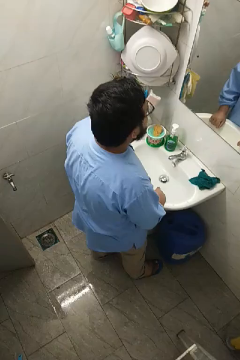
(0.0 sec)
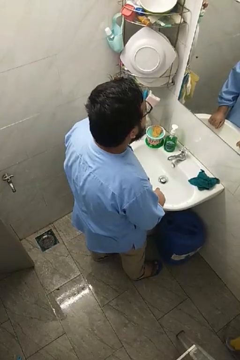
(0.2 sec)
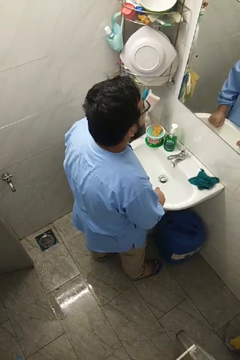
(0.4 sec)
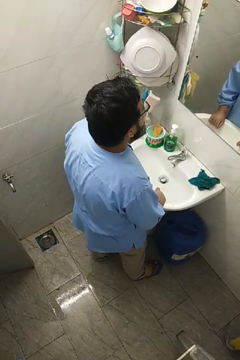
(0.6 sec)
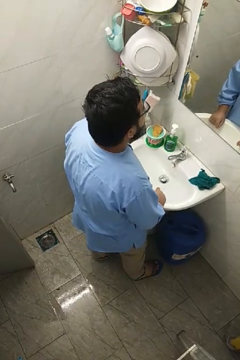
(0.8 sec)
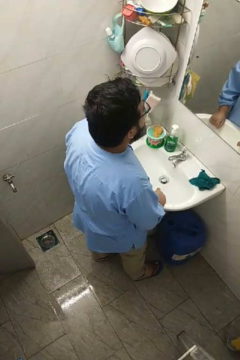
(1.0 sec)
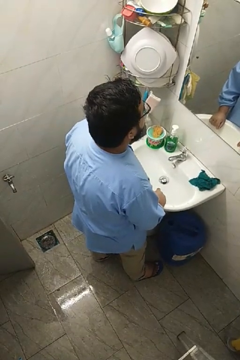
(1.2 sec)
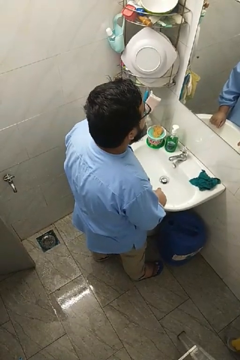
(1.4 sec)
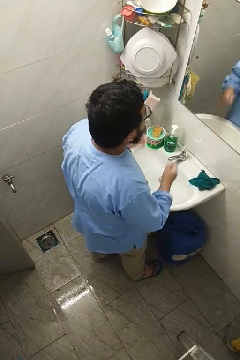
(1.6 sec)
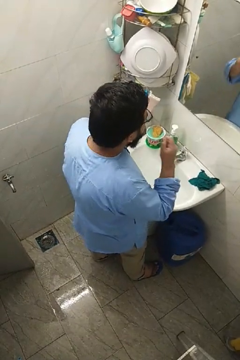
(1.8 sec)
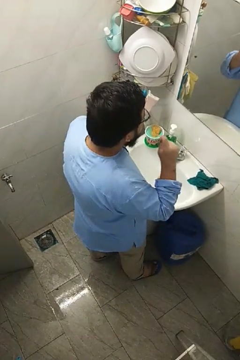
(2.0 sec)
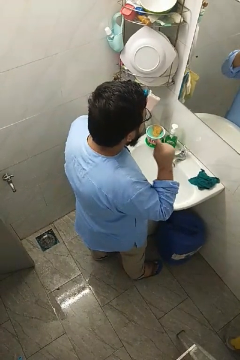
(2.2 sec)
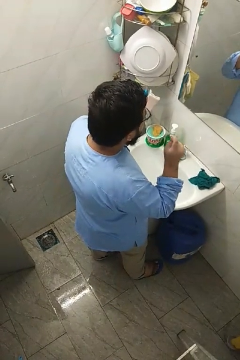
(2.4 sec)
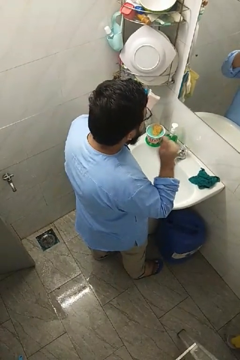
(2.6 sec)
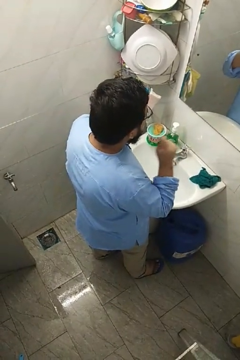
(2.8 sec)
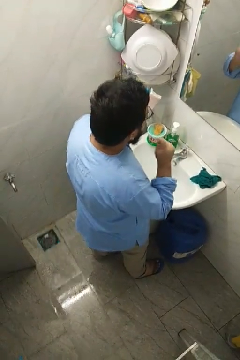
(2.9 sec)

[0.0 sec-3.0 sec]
person flosses

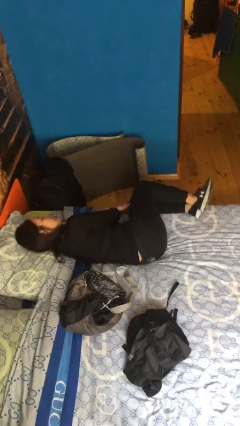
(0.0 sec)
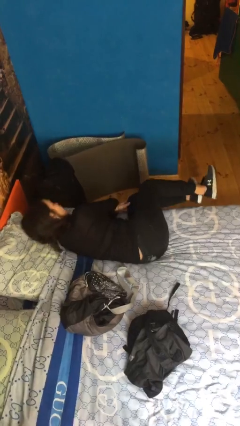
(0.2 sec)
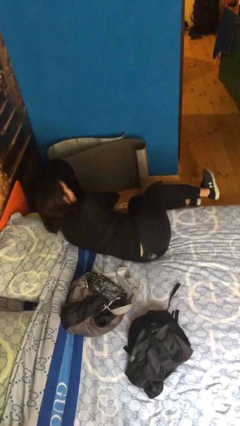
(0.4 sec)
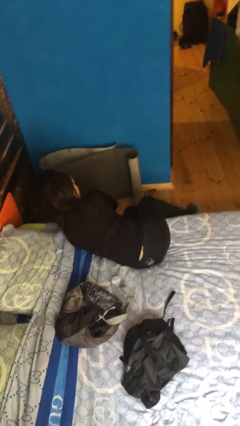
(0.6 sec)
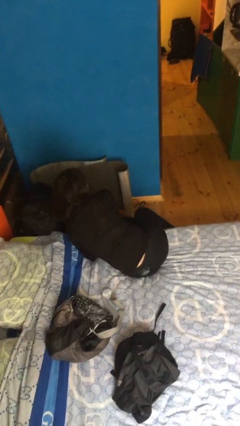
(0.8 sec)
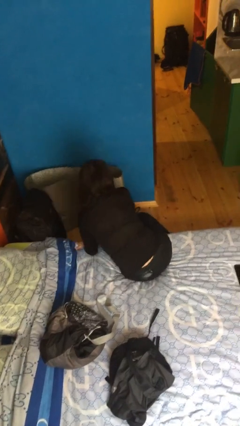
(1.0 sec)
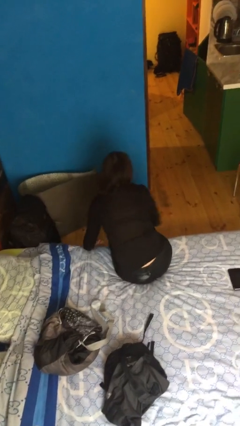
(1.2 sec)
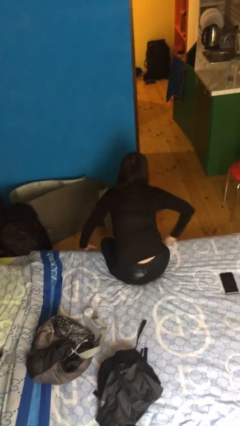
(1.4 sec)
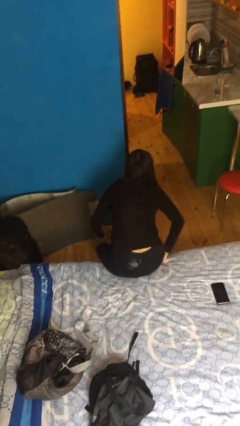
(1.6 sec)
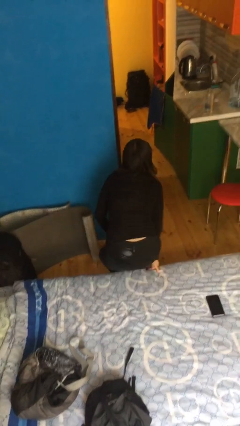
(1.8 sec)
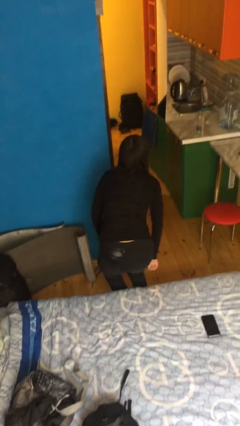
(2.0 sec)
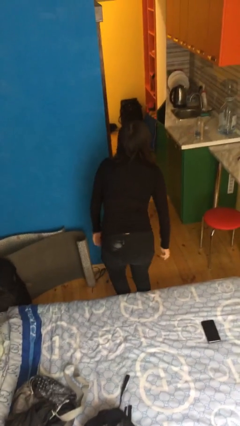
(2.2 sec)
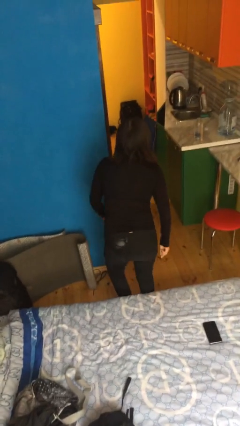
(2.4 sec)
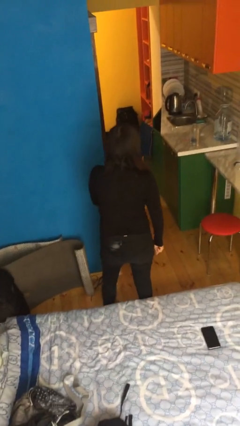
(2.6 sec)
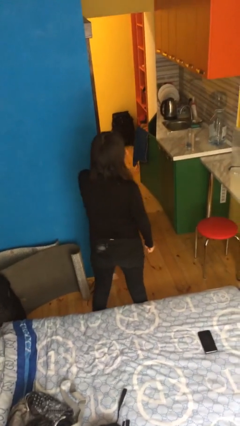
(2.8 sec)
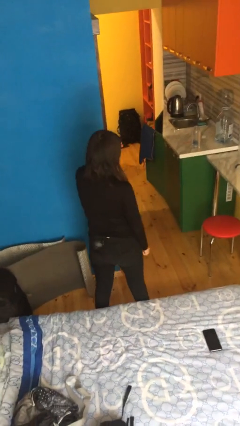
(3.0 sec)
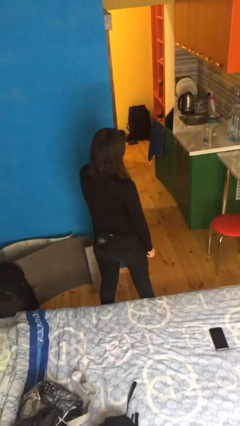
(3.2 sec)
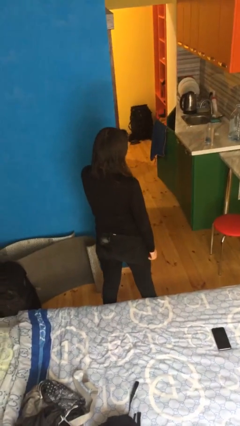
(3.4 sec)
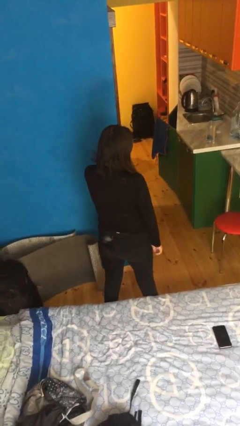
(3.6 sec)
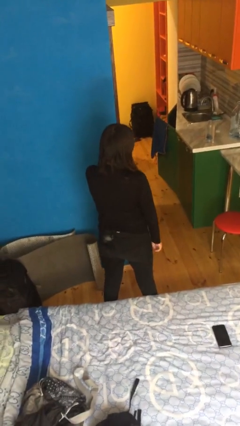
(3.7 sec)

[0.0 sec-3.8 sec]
person stands up

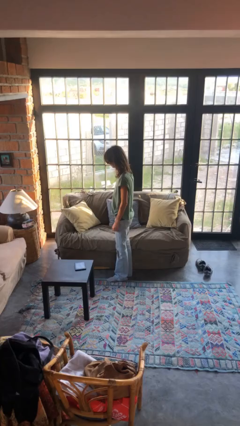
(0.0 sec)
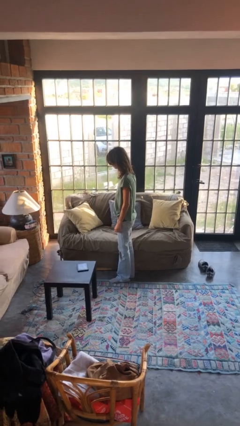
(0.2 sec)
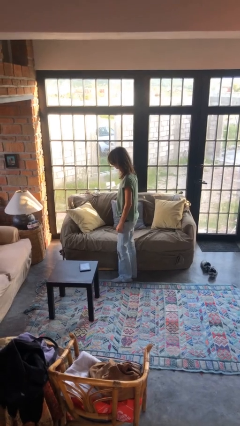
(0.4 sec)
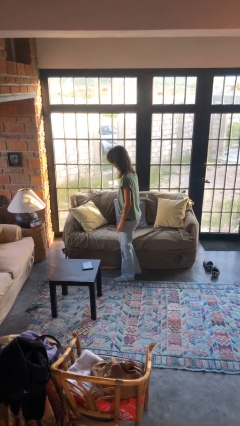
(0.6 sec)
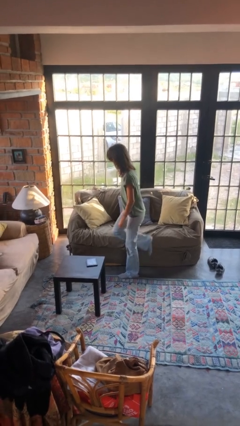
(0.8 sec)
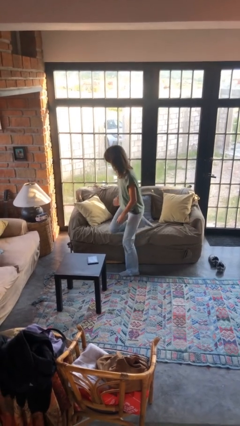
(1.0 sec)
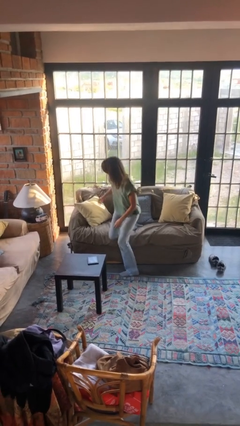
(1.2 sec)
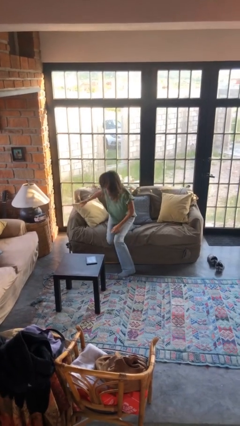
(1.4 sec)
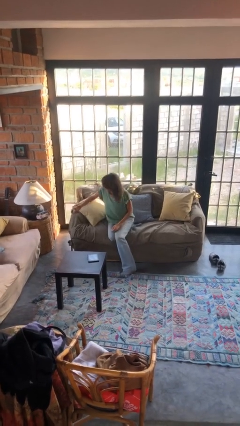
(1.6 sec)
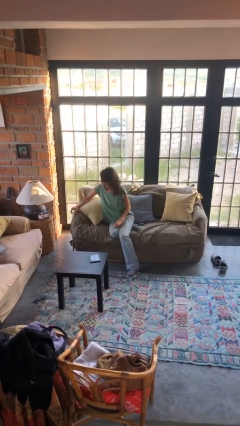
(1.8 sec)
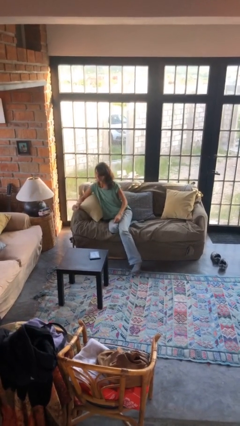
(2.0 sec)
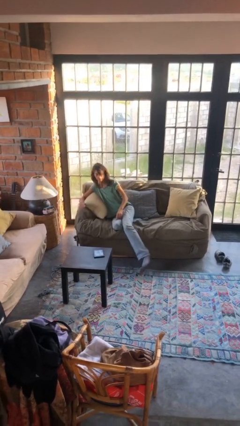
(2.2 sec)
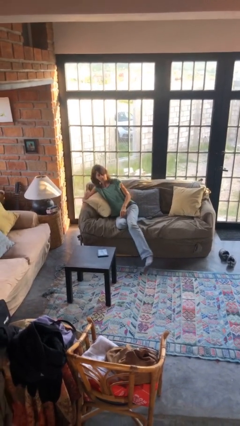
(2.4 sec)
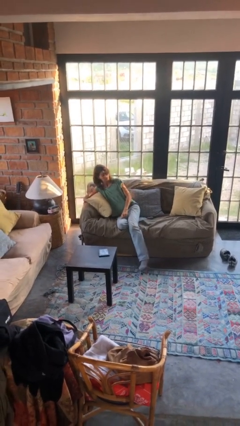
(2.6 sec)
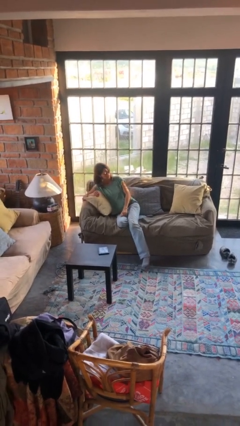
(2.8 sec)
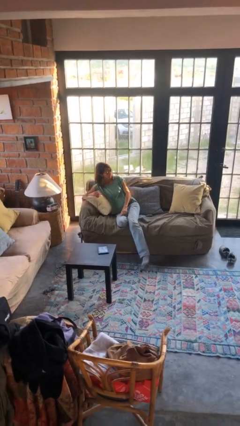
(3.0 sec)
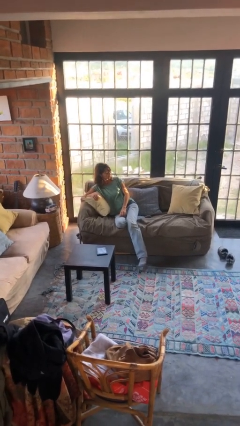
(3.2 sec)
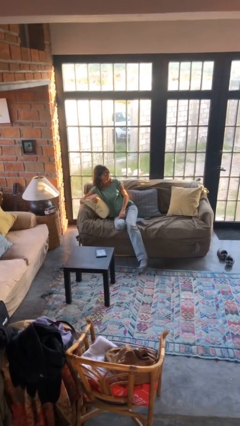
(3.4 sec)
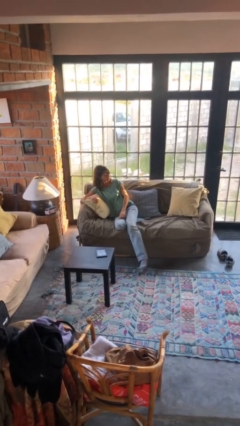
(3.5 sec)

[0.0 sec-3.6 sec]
person lies down on couch

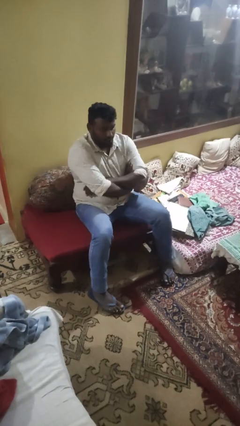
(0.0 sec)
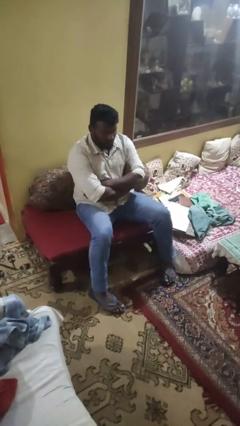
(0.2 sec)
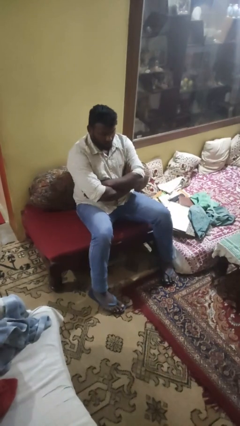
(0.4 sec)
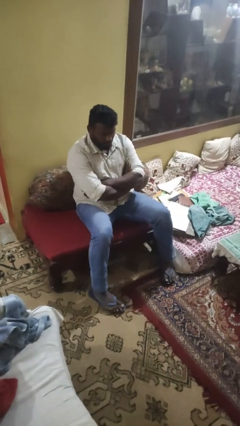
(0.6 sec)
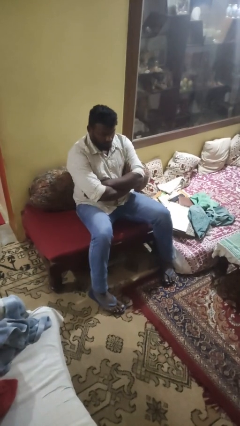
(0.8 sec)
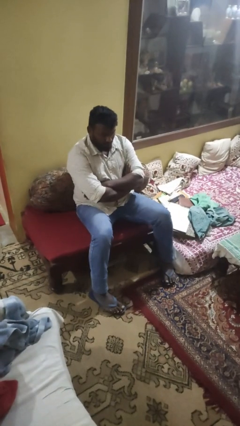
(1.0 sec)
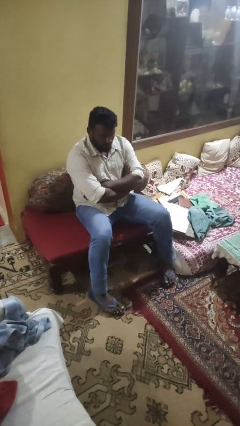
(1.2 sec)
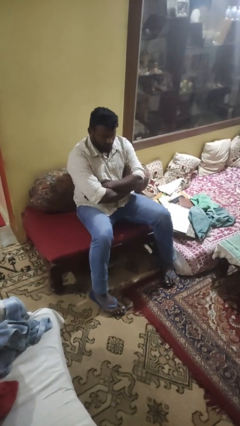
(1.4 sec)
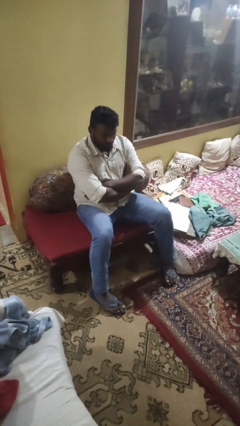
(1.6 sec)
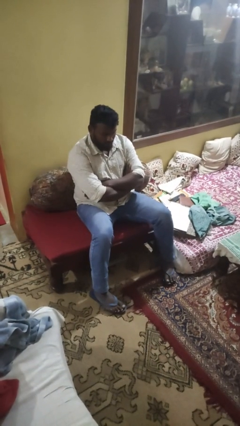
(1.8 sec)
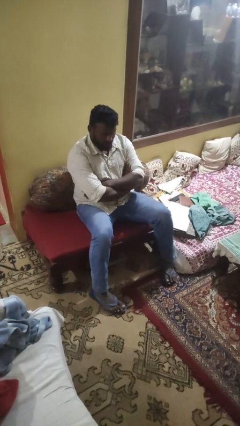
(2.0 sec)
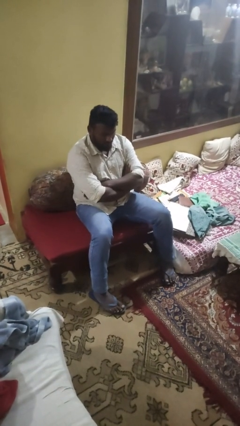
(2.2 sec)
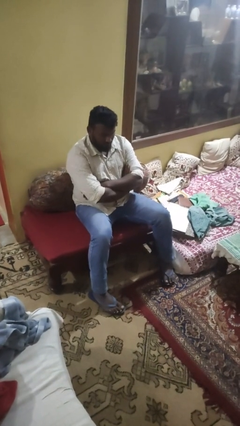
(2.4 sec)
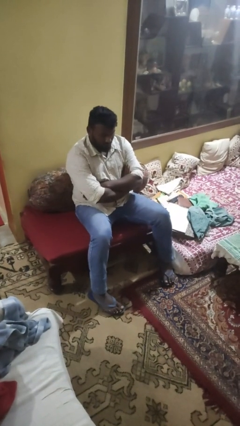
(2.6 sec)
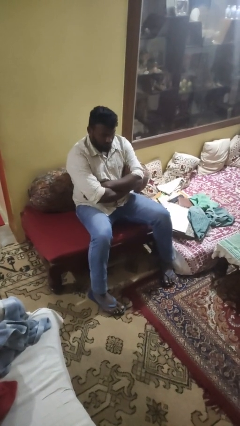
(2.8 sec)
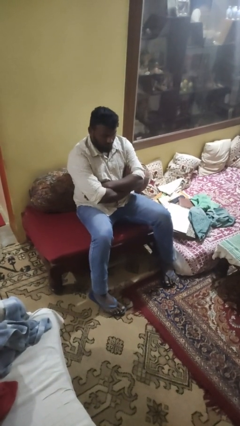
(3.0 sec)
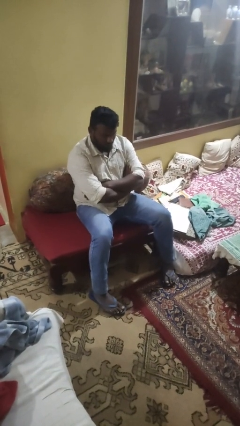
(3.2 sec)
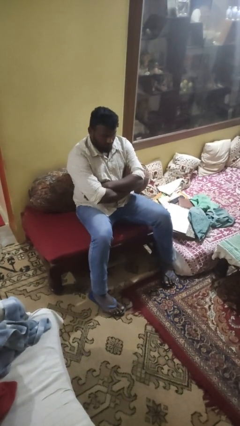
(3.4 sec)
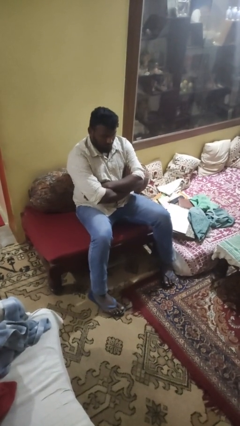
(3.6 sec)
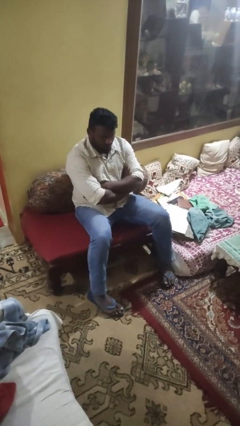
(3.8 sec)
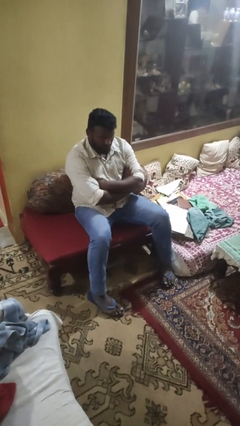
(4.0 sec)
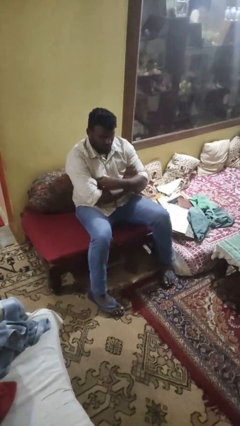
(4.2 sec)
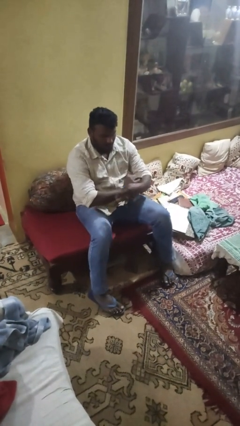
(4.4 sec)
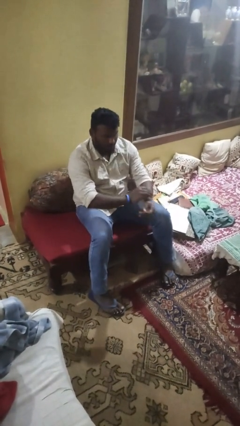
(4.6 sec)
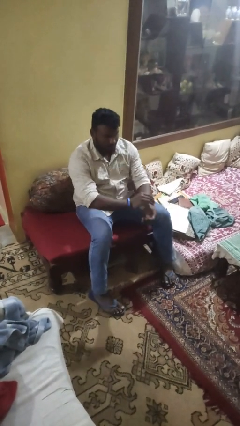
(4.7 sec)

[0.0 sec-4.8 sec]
person crosses arms

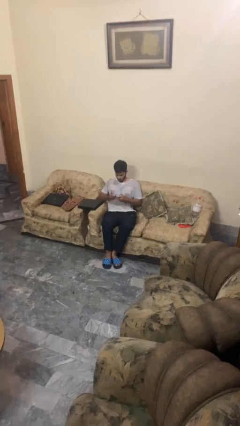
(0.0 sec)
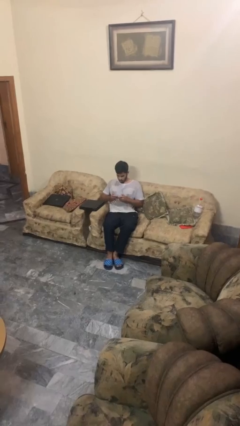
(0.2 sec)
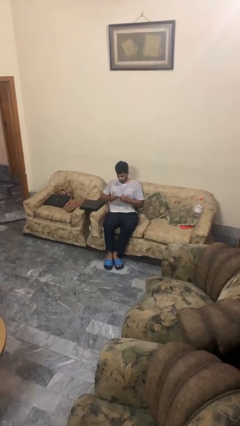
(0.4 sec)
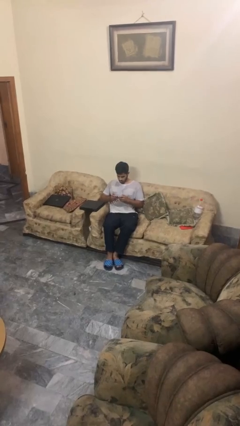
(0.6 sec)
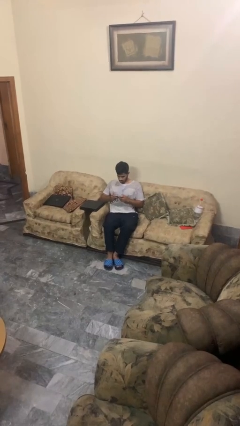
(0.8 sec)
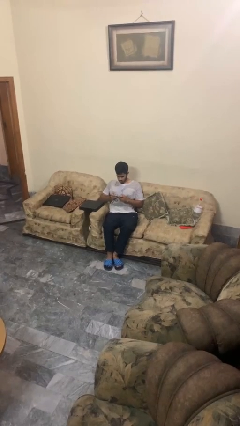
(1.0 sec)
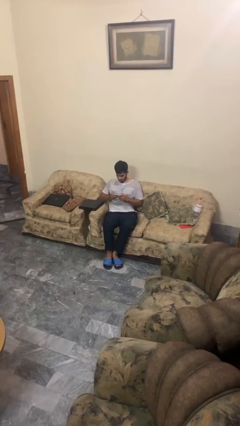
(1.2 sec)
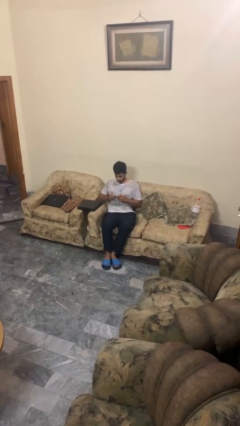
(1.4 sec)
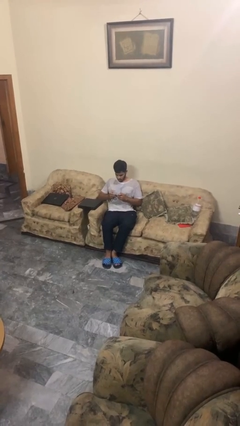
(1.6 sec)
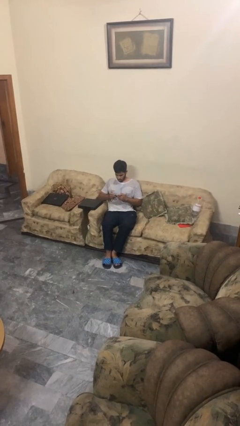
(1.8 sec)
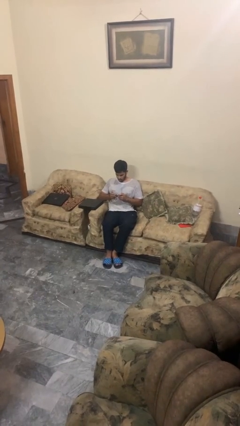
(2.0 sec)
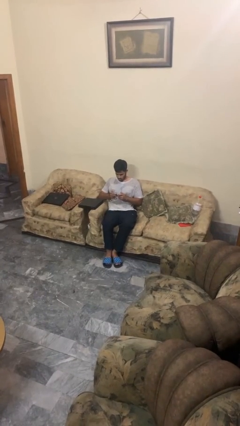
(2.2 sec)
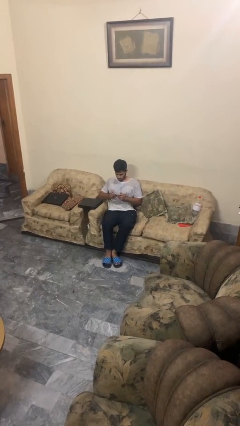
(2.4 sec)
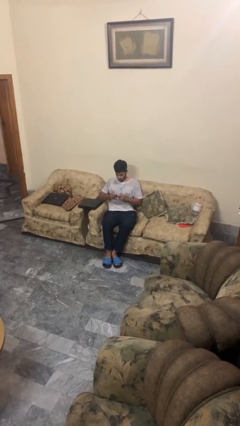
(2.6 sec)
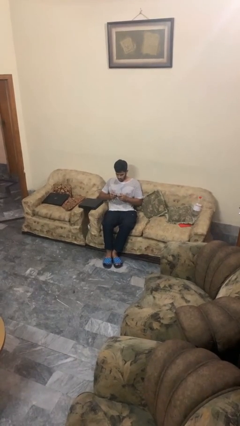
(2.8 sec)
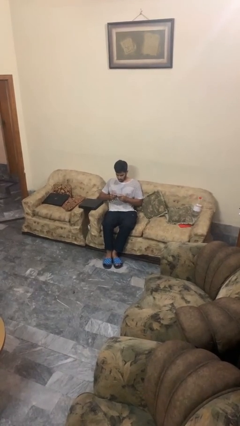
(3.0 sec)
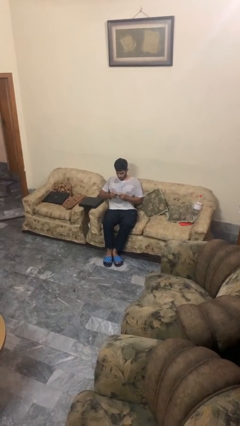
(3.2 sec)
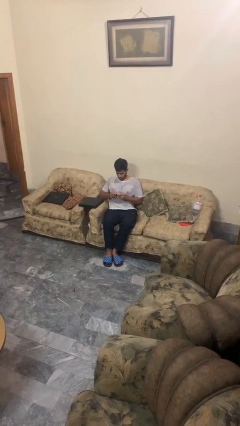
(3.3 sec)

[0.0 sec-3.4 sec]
person interacts with handheld game
